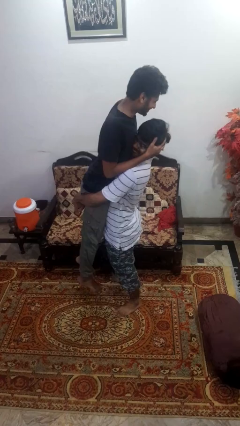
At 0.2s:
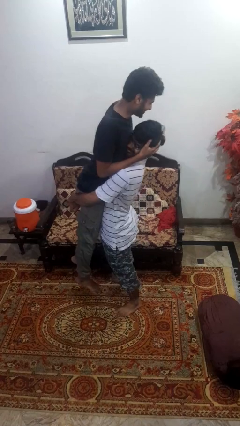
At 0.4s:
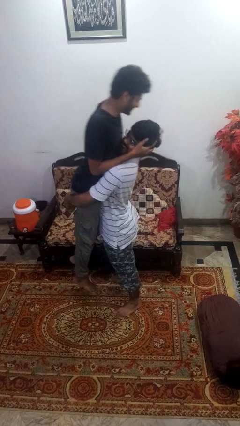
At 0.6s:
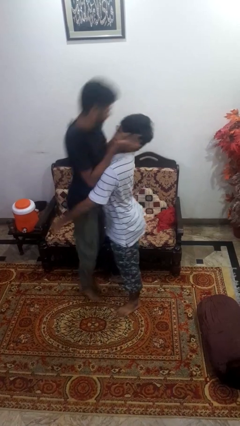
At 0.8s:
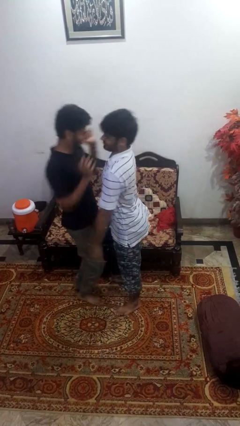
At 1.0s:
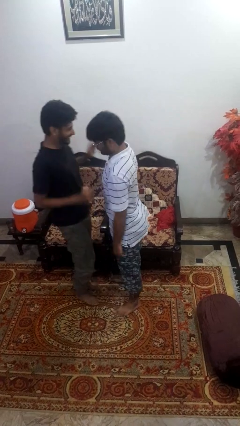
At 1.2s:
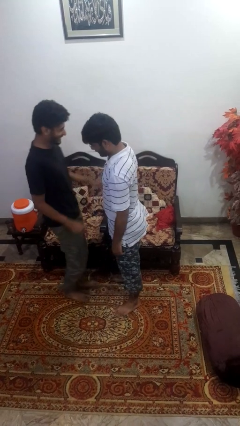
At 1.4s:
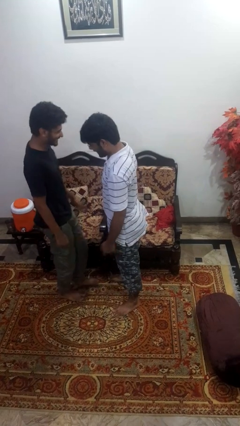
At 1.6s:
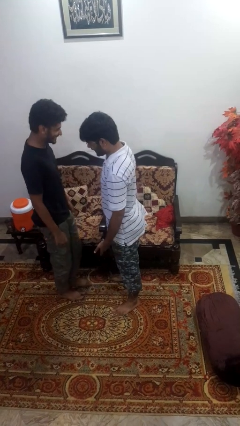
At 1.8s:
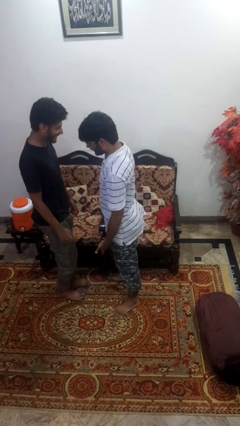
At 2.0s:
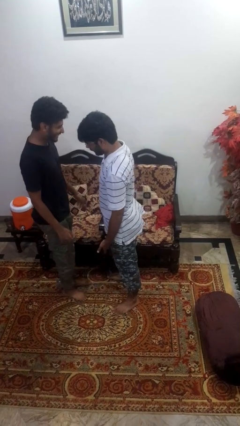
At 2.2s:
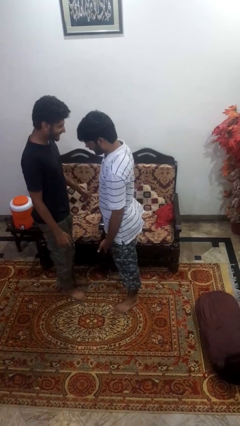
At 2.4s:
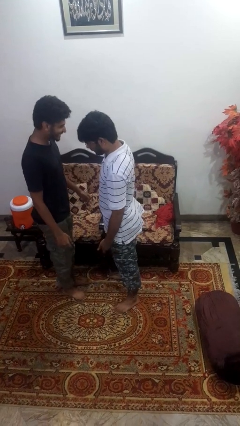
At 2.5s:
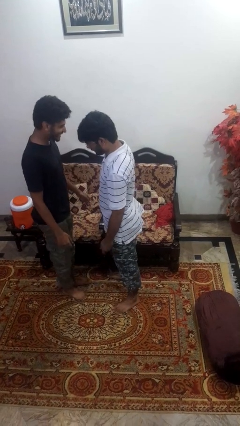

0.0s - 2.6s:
person puts down person

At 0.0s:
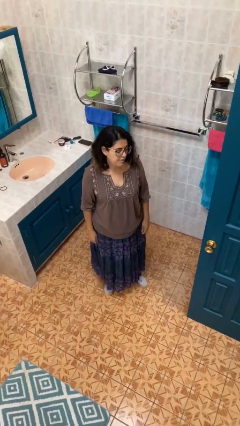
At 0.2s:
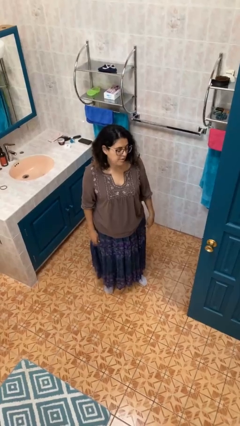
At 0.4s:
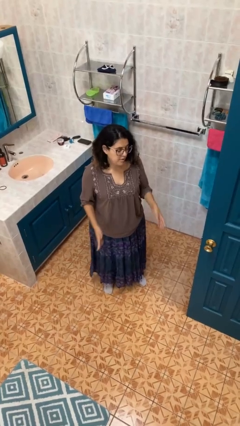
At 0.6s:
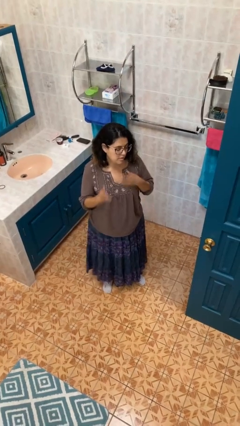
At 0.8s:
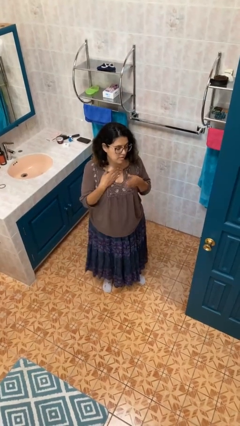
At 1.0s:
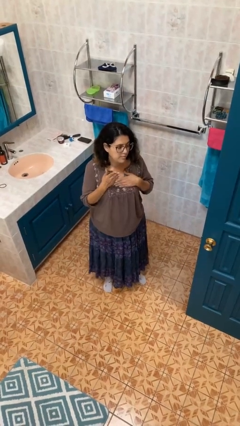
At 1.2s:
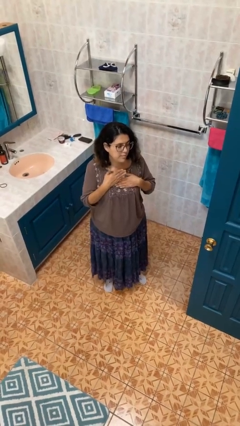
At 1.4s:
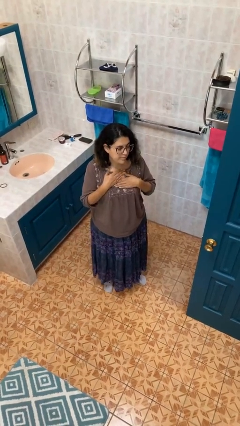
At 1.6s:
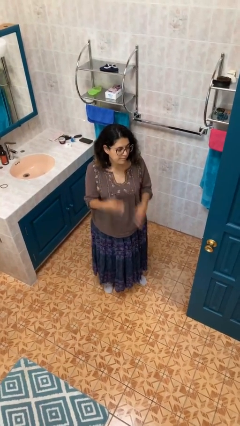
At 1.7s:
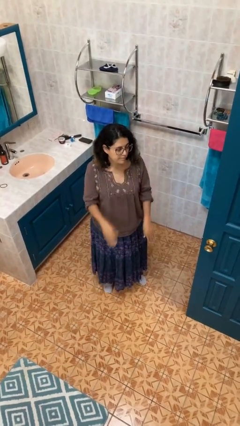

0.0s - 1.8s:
person drums on chest

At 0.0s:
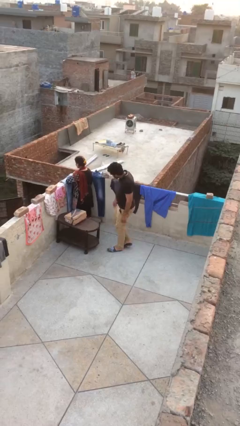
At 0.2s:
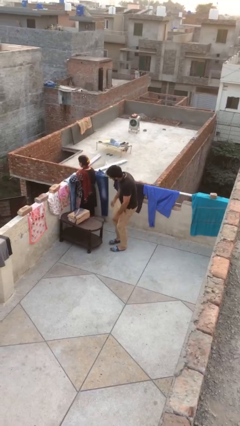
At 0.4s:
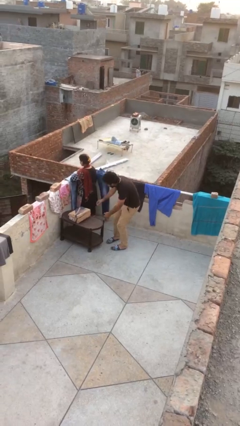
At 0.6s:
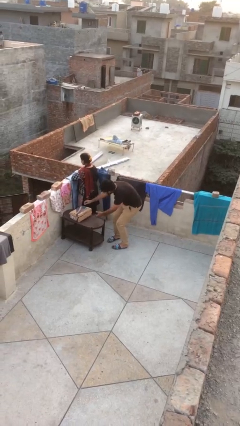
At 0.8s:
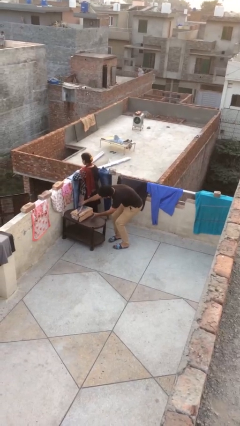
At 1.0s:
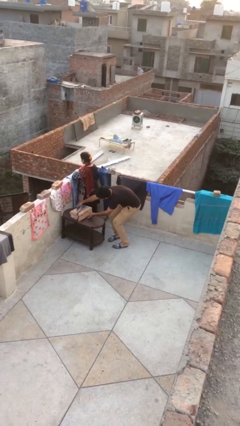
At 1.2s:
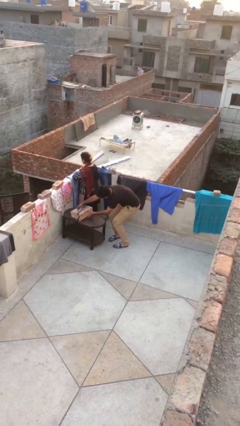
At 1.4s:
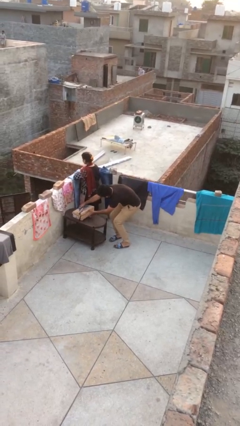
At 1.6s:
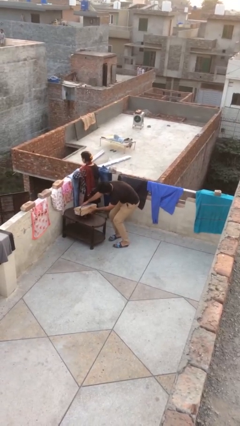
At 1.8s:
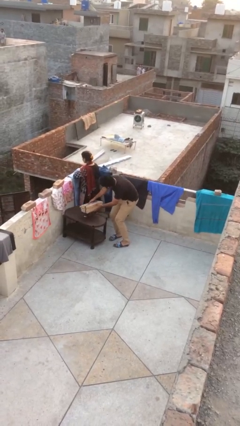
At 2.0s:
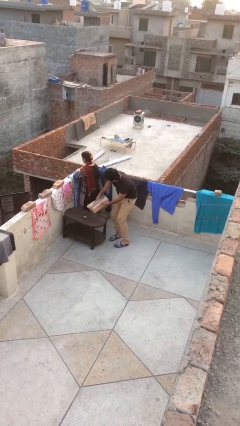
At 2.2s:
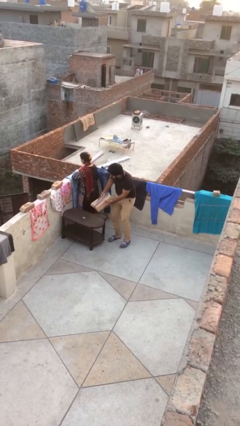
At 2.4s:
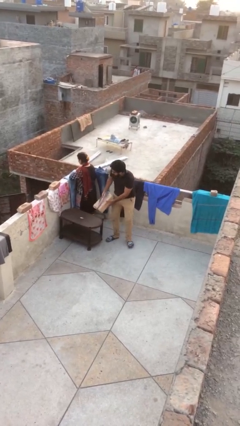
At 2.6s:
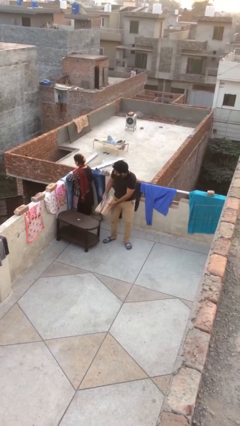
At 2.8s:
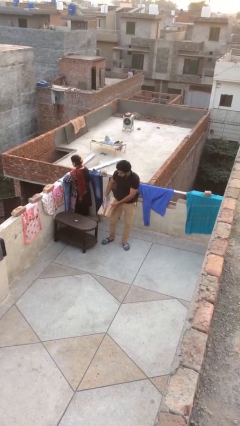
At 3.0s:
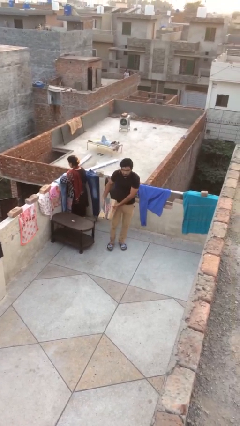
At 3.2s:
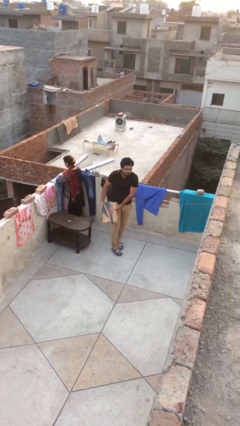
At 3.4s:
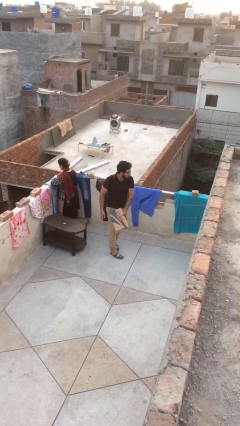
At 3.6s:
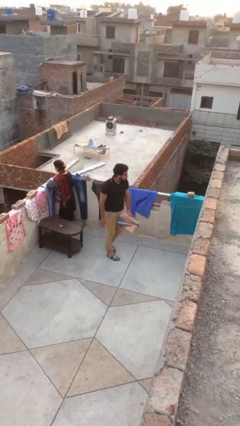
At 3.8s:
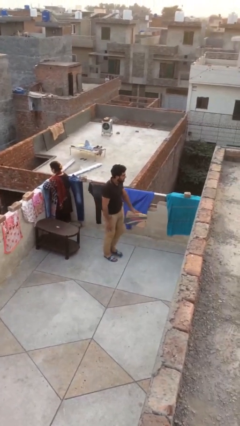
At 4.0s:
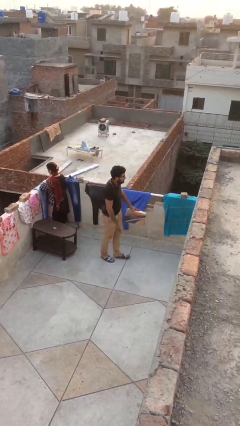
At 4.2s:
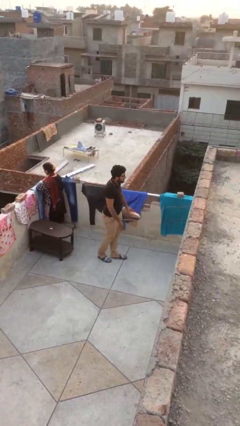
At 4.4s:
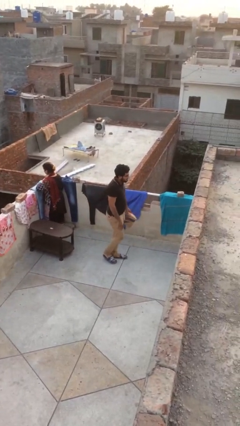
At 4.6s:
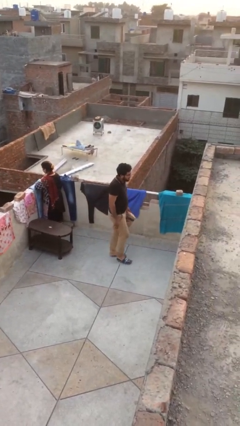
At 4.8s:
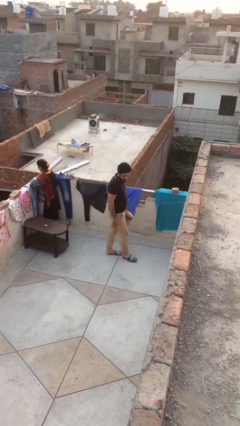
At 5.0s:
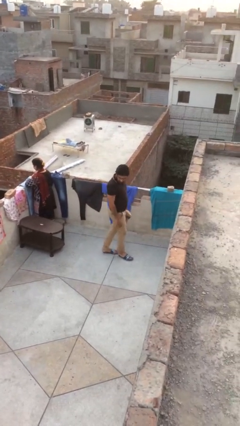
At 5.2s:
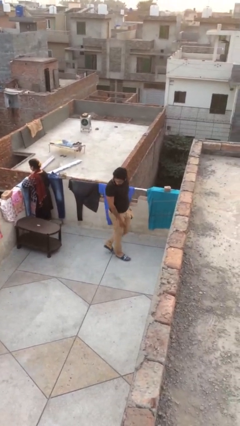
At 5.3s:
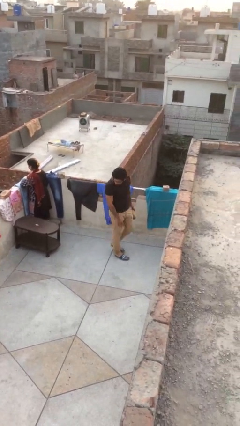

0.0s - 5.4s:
person steals object from person

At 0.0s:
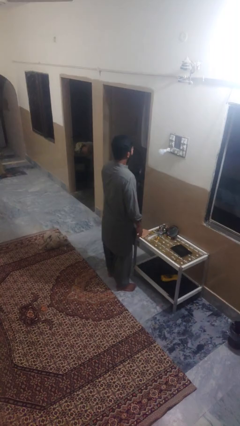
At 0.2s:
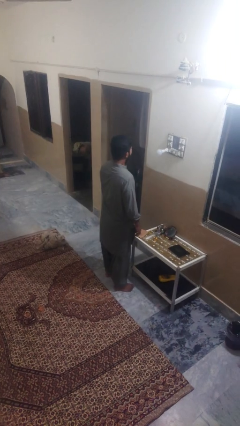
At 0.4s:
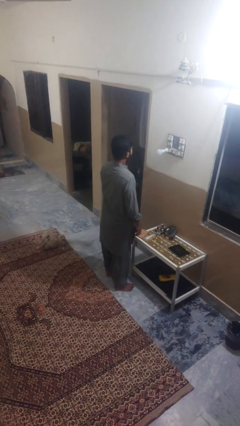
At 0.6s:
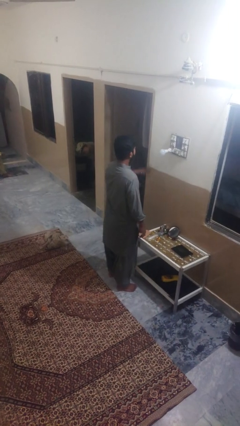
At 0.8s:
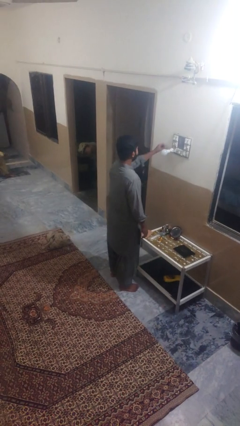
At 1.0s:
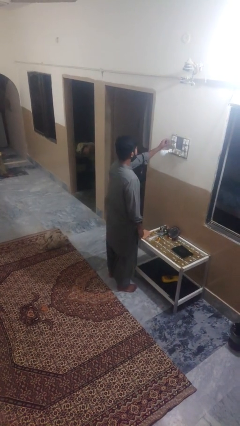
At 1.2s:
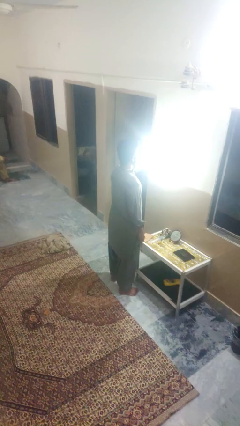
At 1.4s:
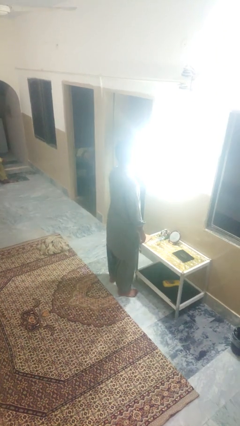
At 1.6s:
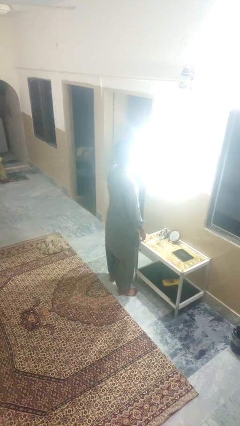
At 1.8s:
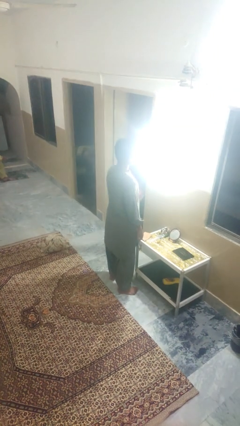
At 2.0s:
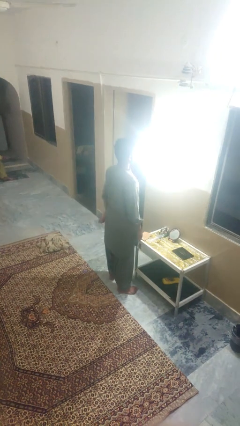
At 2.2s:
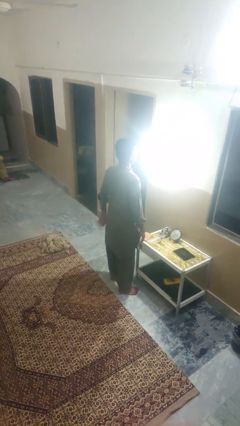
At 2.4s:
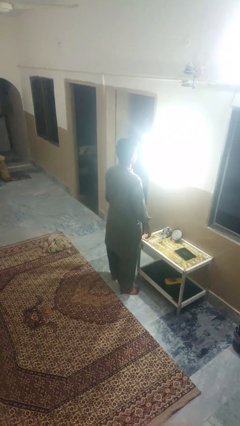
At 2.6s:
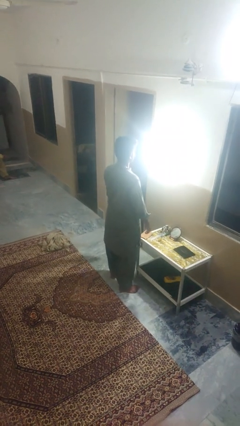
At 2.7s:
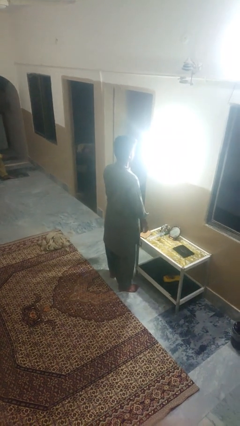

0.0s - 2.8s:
person turns on lamp

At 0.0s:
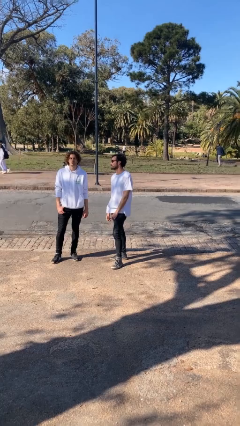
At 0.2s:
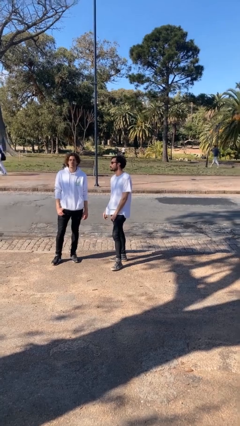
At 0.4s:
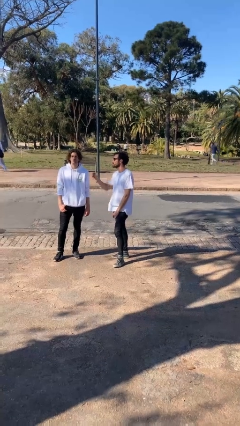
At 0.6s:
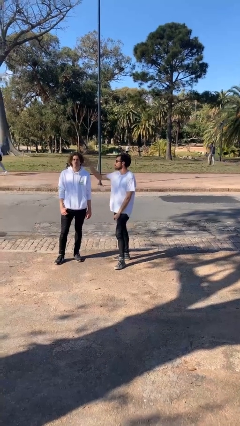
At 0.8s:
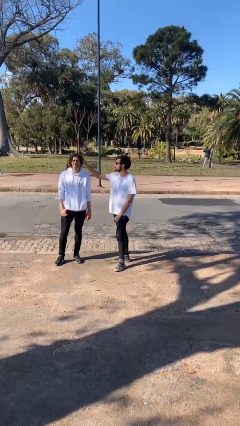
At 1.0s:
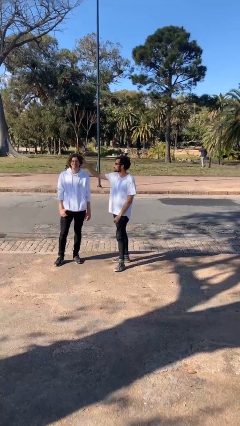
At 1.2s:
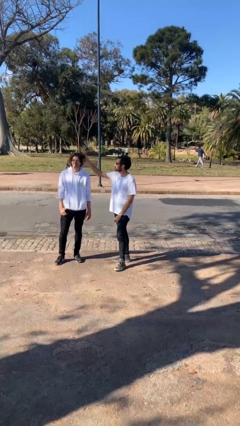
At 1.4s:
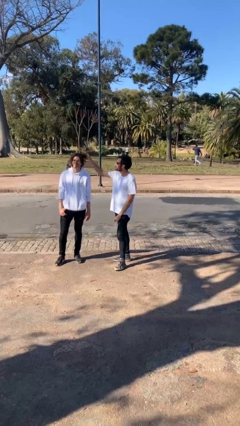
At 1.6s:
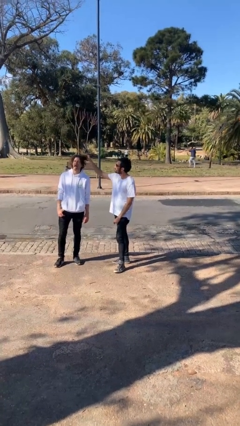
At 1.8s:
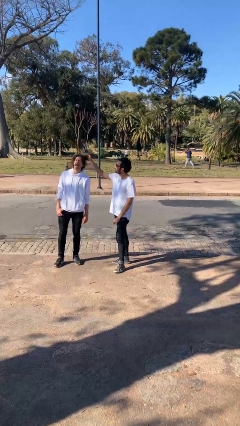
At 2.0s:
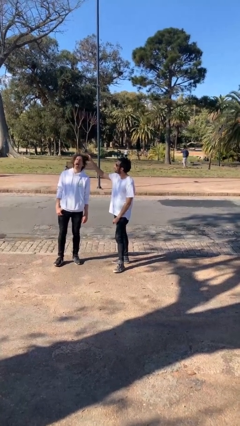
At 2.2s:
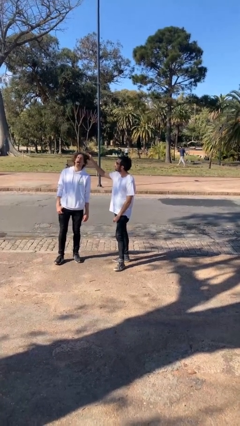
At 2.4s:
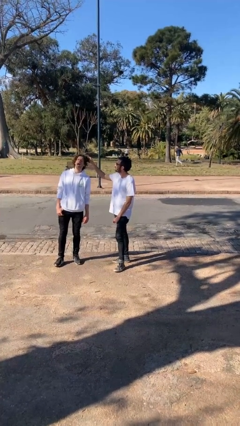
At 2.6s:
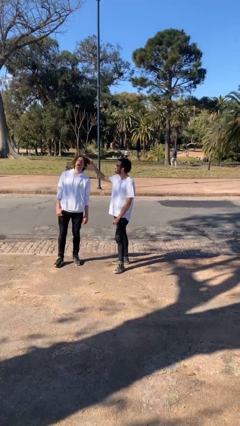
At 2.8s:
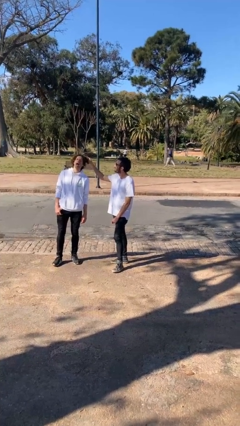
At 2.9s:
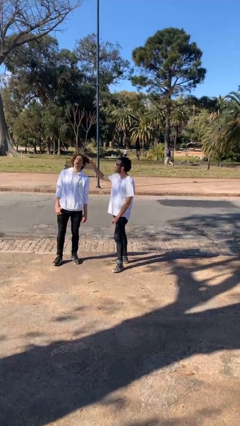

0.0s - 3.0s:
person grabs person by hair

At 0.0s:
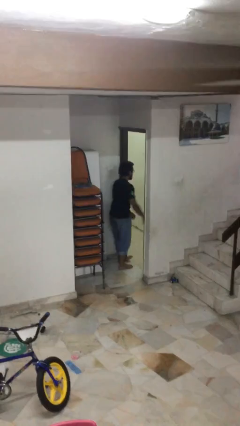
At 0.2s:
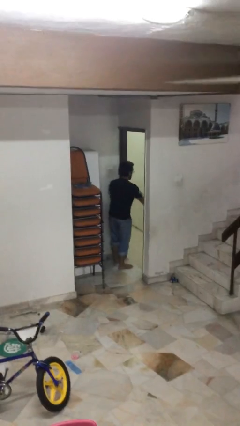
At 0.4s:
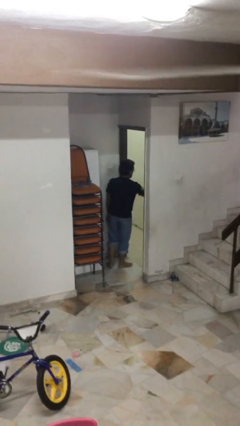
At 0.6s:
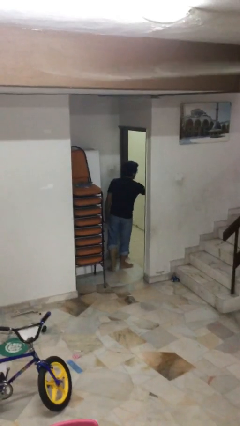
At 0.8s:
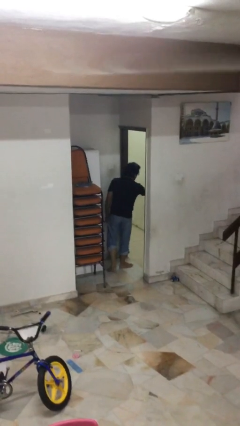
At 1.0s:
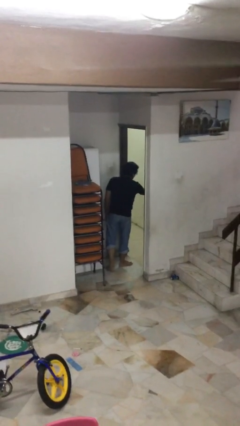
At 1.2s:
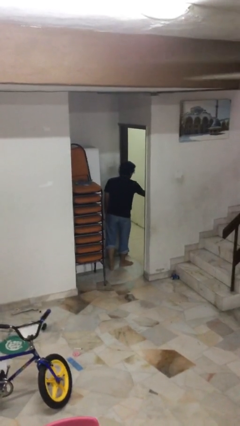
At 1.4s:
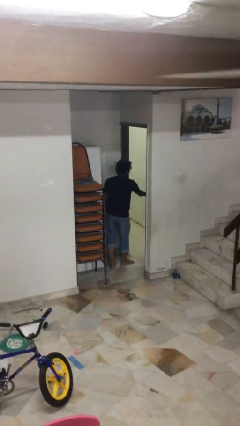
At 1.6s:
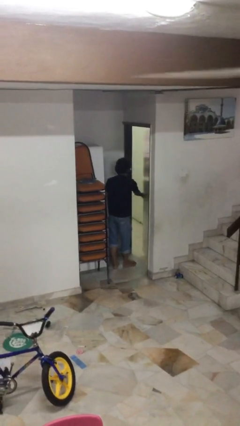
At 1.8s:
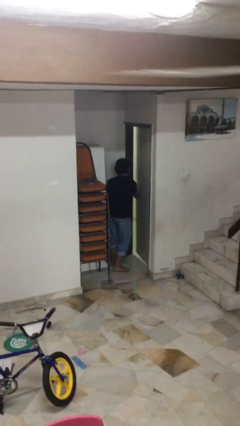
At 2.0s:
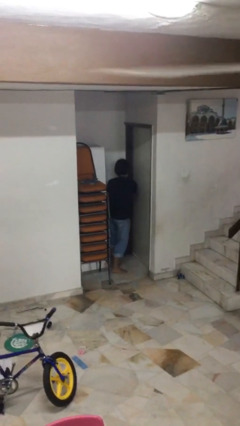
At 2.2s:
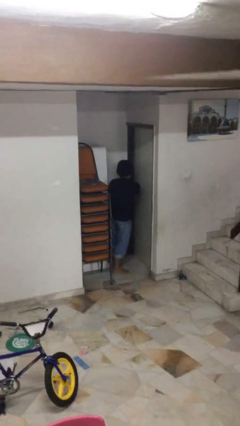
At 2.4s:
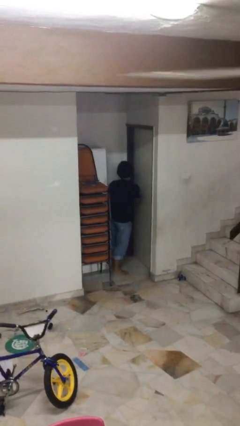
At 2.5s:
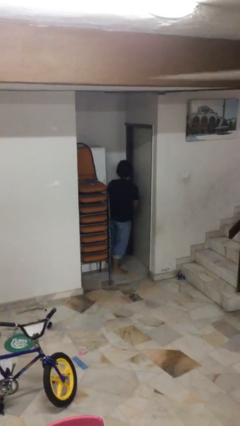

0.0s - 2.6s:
person closes facility door
